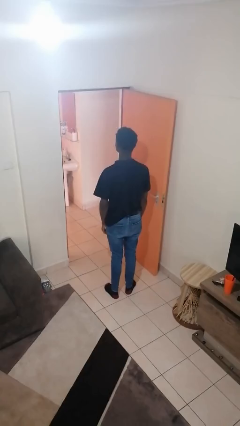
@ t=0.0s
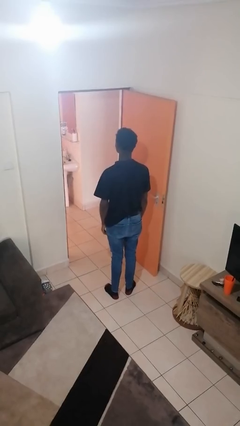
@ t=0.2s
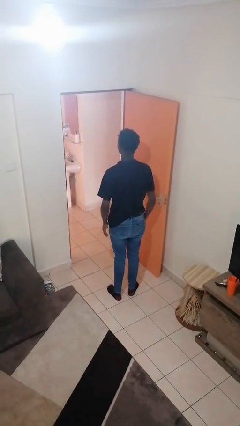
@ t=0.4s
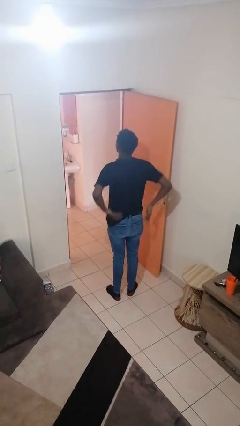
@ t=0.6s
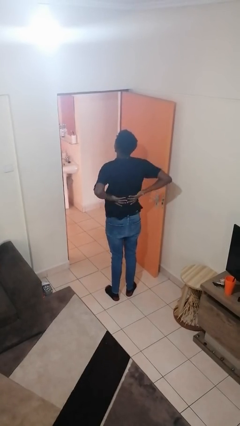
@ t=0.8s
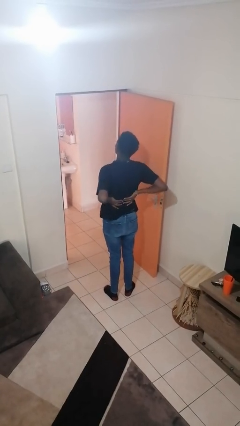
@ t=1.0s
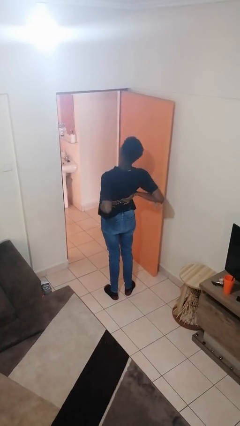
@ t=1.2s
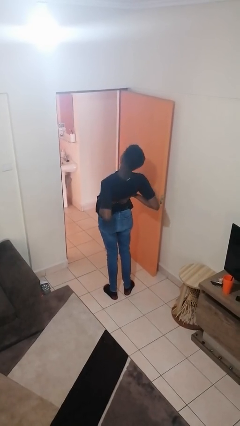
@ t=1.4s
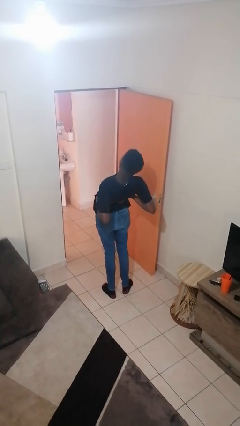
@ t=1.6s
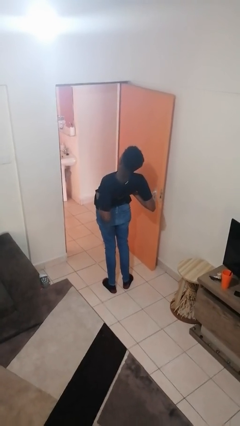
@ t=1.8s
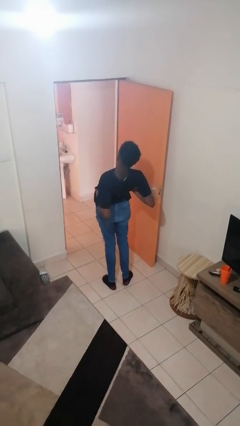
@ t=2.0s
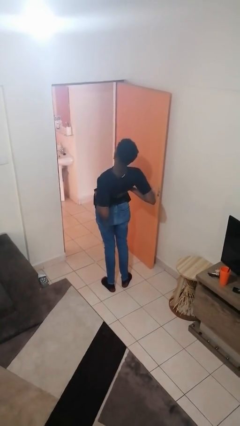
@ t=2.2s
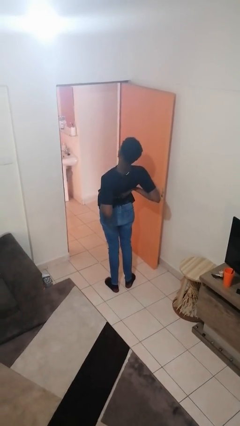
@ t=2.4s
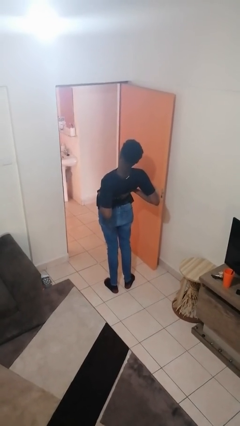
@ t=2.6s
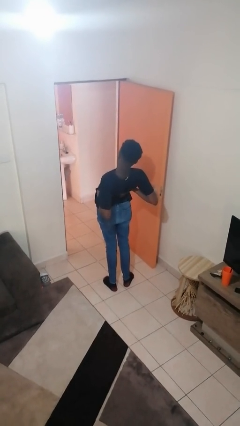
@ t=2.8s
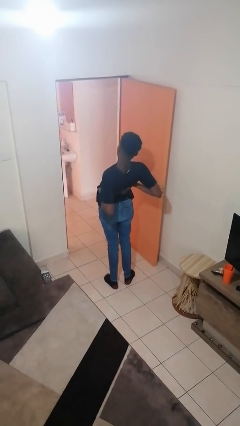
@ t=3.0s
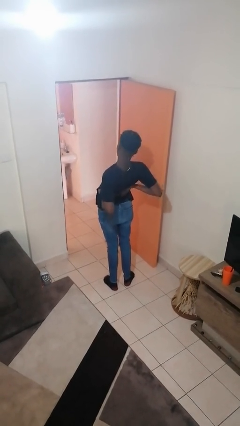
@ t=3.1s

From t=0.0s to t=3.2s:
person stretches back

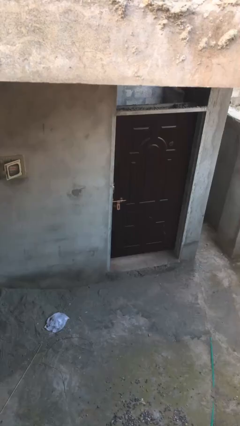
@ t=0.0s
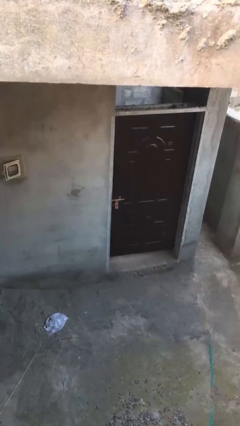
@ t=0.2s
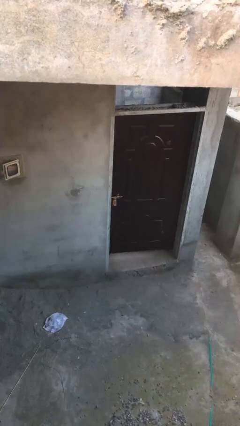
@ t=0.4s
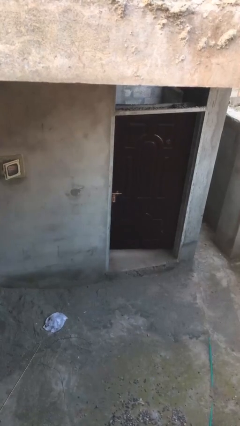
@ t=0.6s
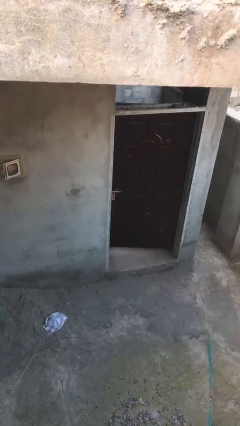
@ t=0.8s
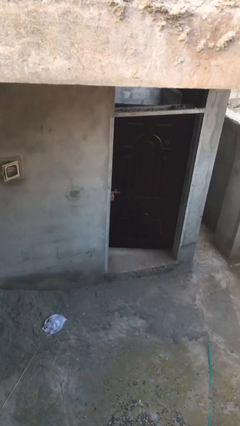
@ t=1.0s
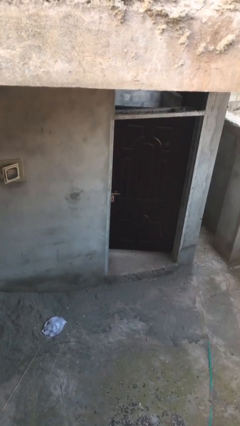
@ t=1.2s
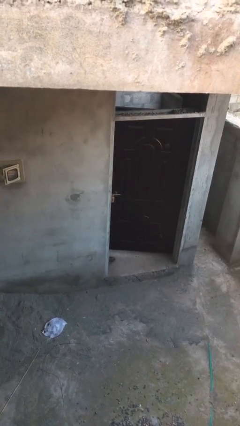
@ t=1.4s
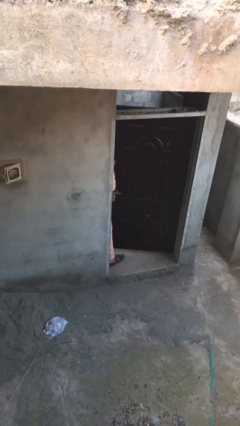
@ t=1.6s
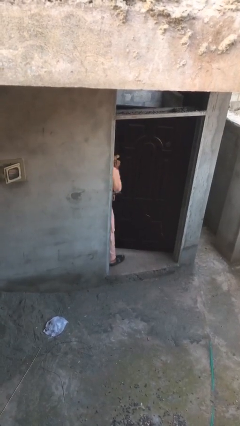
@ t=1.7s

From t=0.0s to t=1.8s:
person opens facility door

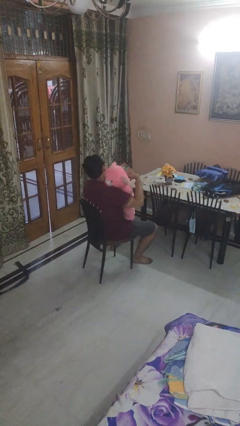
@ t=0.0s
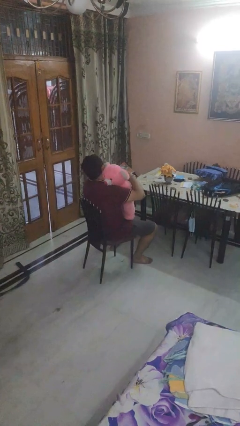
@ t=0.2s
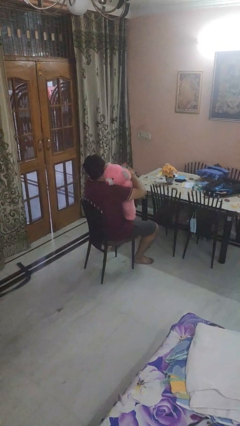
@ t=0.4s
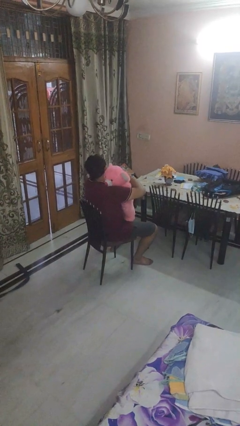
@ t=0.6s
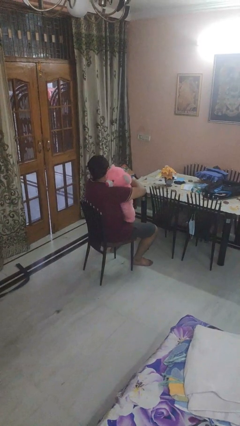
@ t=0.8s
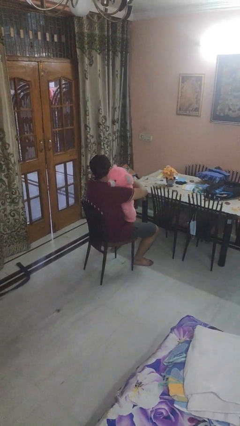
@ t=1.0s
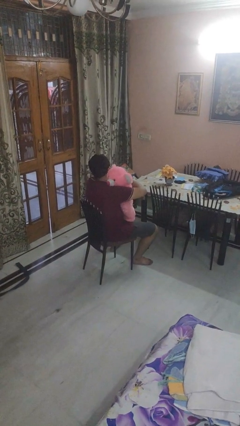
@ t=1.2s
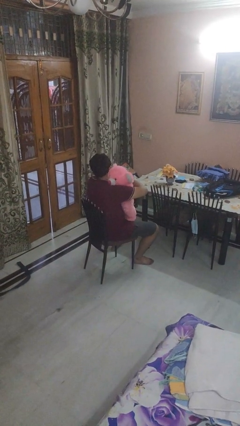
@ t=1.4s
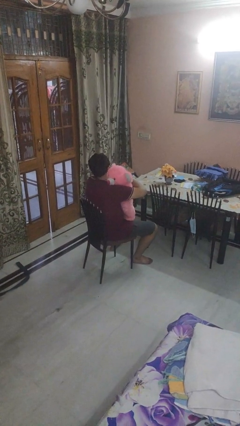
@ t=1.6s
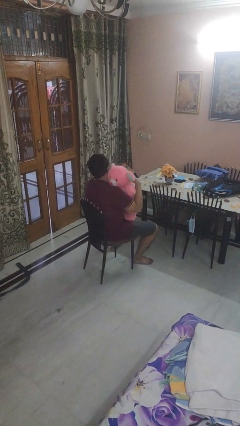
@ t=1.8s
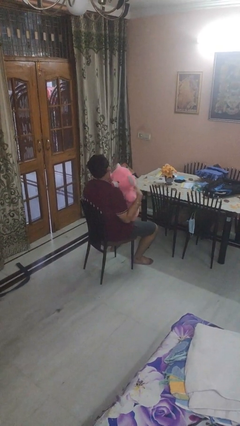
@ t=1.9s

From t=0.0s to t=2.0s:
person hugs stuffed animal

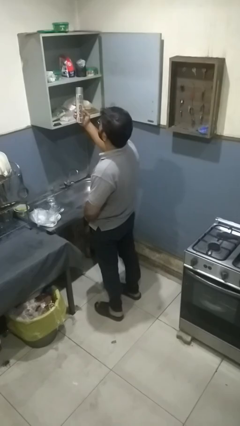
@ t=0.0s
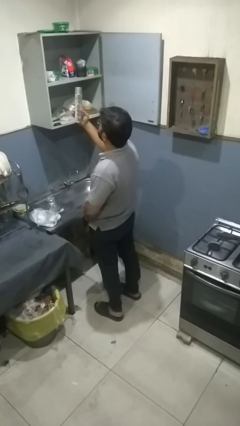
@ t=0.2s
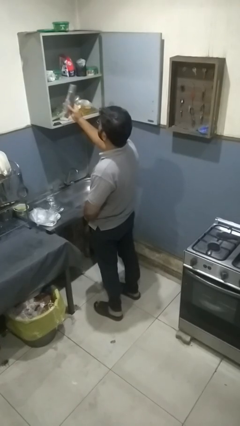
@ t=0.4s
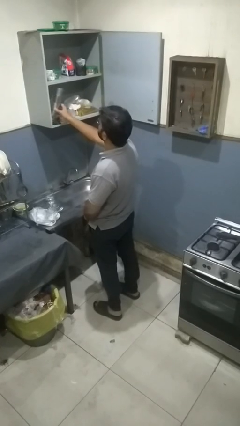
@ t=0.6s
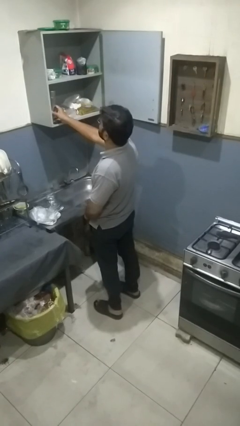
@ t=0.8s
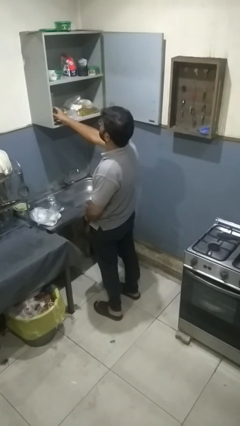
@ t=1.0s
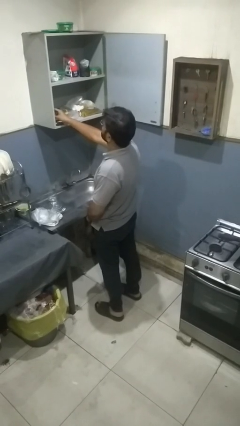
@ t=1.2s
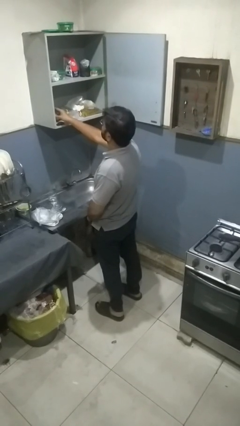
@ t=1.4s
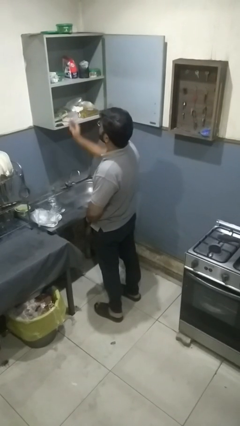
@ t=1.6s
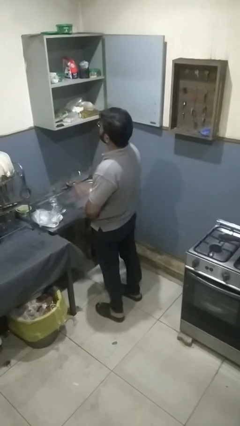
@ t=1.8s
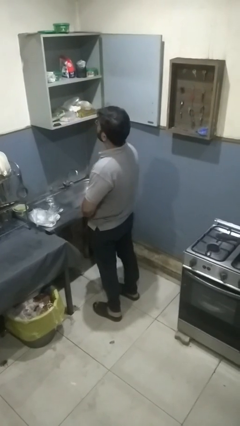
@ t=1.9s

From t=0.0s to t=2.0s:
person puts down object into cabinet

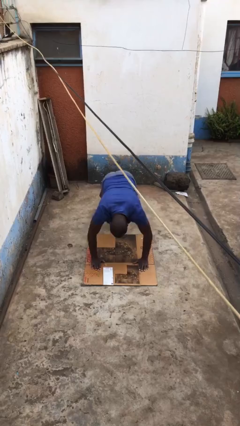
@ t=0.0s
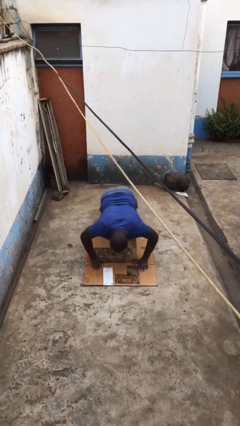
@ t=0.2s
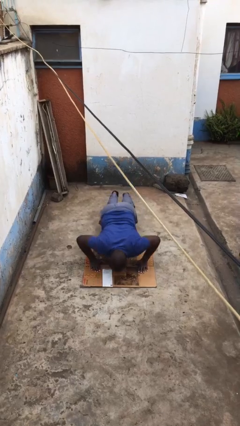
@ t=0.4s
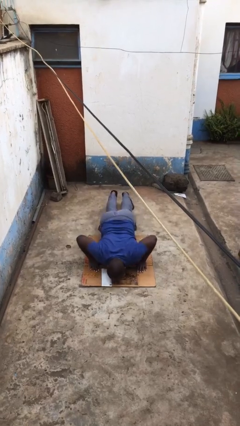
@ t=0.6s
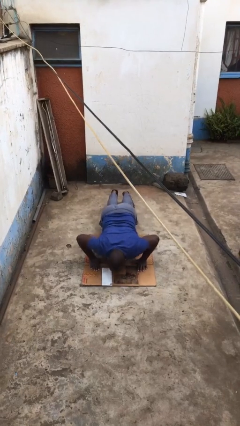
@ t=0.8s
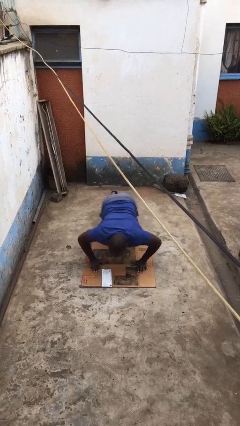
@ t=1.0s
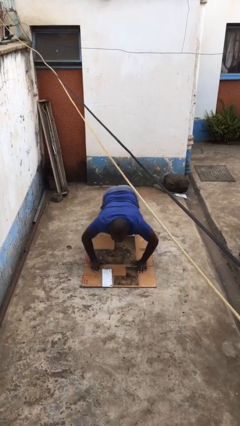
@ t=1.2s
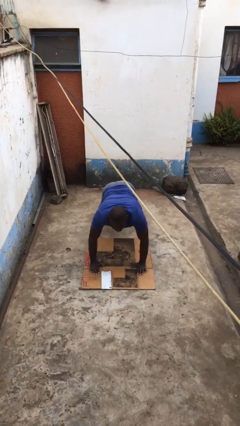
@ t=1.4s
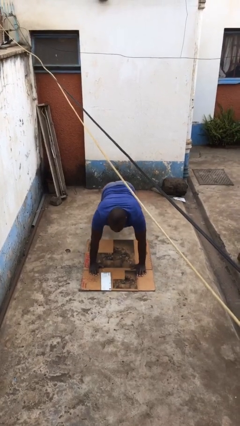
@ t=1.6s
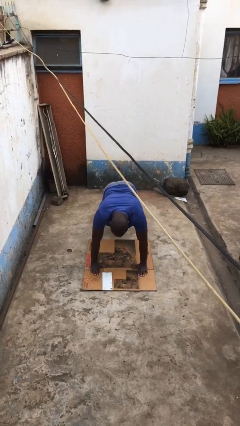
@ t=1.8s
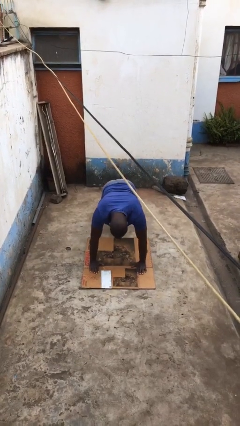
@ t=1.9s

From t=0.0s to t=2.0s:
person exercises with pushup

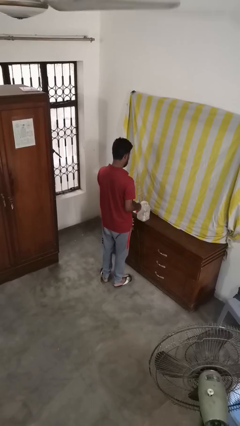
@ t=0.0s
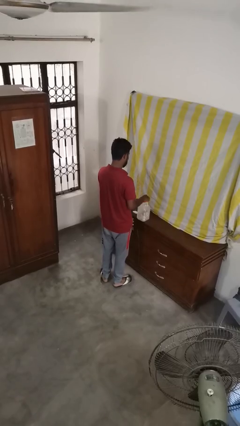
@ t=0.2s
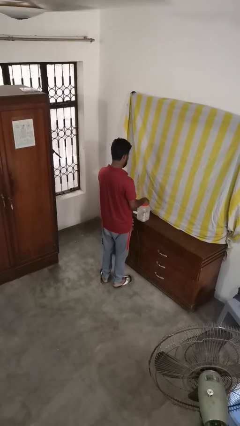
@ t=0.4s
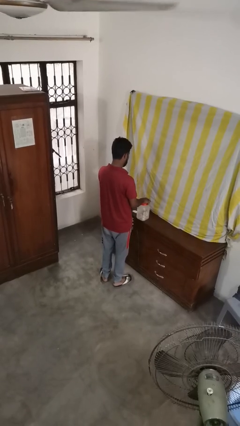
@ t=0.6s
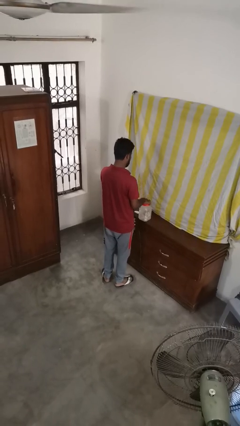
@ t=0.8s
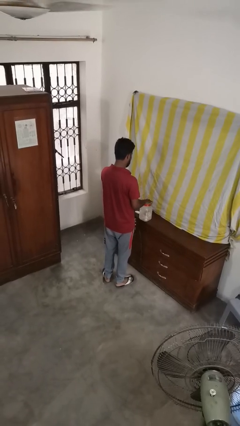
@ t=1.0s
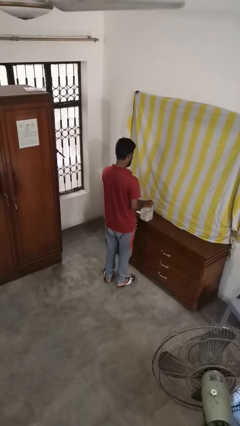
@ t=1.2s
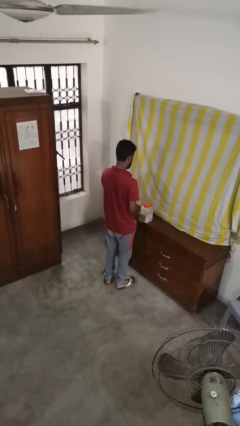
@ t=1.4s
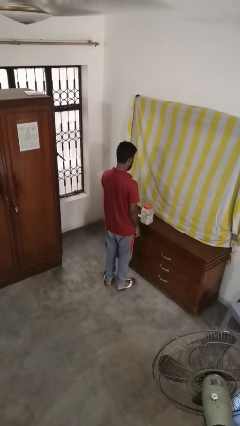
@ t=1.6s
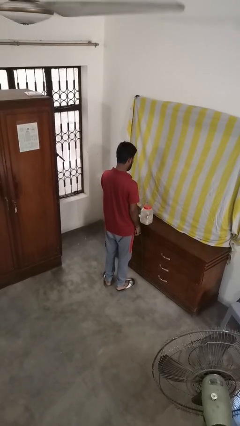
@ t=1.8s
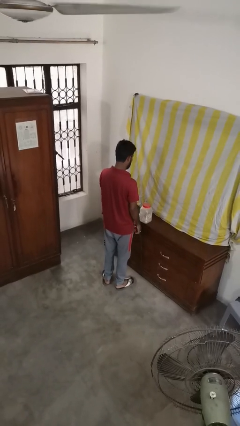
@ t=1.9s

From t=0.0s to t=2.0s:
person closes jar

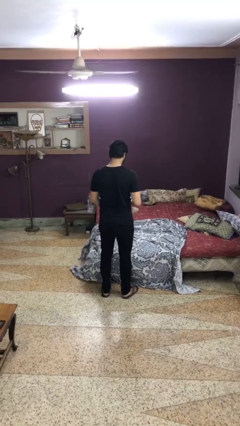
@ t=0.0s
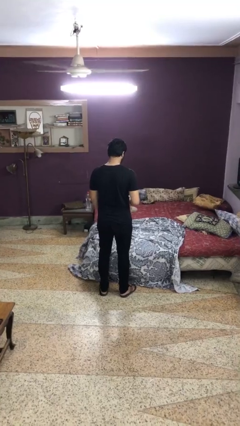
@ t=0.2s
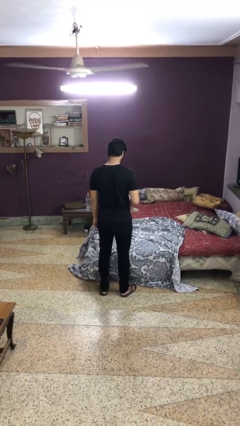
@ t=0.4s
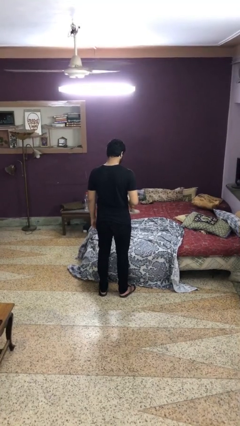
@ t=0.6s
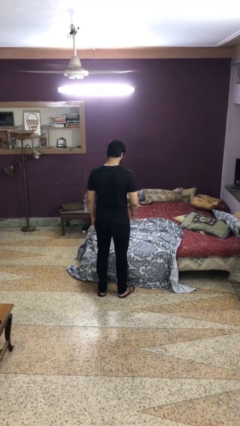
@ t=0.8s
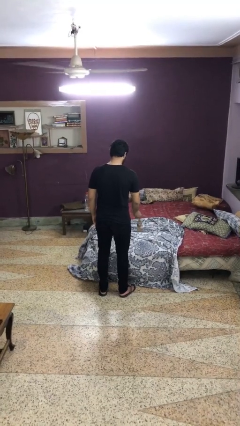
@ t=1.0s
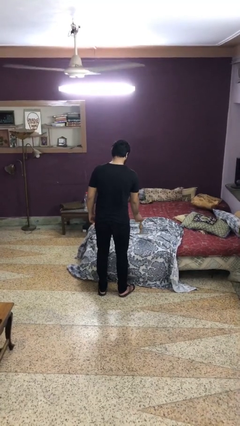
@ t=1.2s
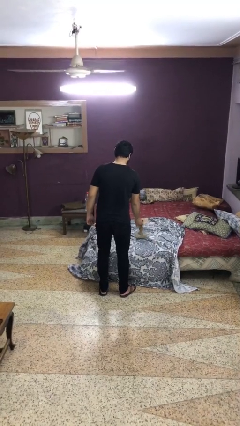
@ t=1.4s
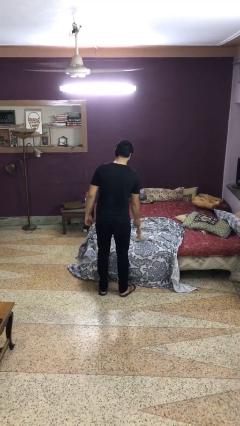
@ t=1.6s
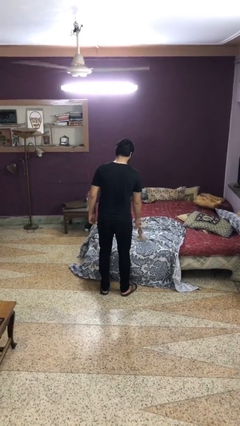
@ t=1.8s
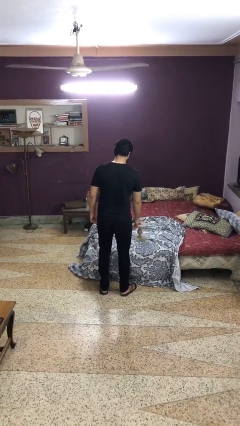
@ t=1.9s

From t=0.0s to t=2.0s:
person puts down object on bed

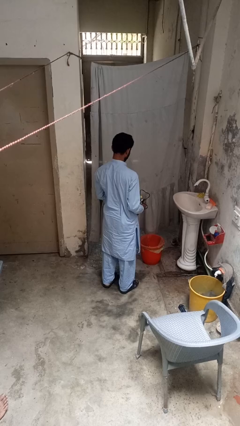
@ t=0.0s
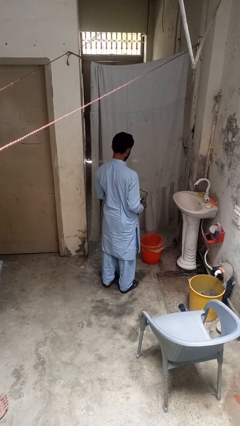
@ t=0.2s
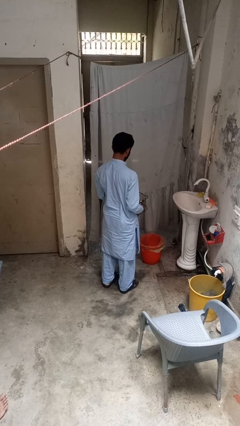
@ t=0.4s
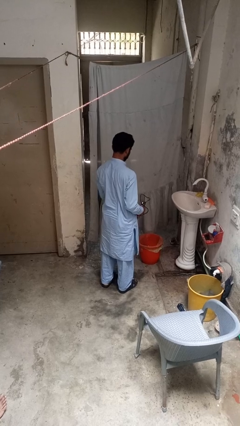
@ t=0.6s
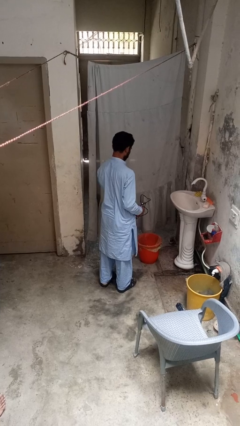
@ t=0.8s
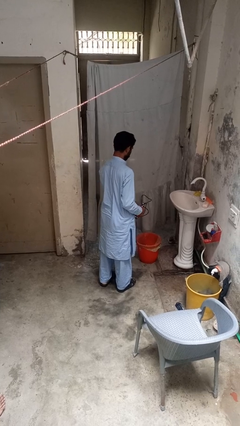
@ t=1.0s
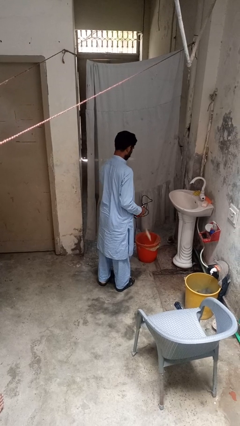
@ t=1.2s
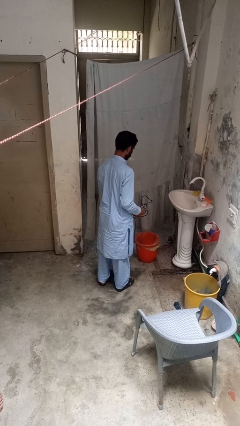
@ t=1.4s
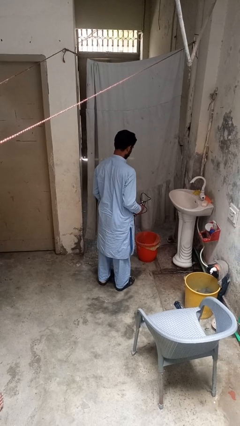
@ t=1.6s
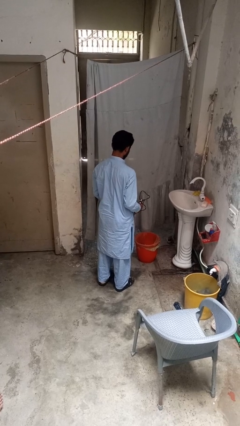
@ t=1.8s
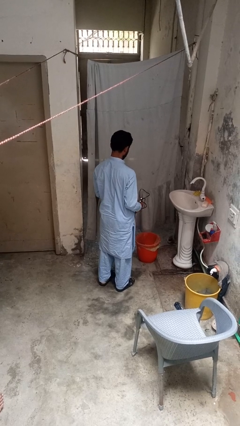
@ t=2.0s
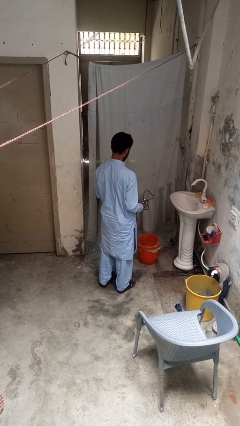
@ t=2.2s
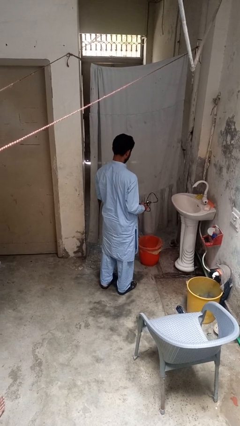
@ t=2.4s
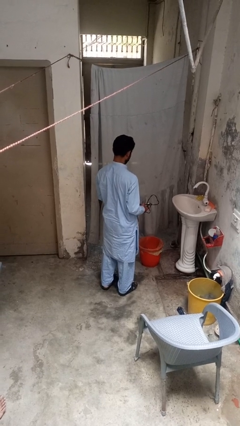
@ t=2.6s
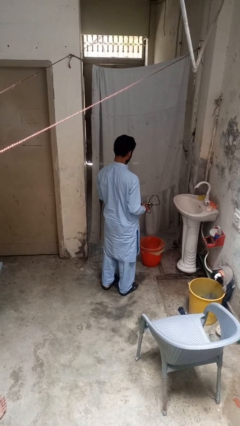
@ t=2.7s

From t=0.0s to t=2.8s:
person discards trash
